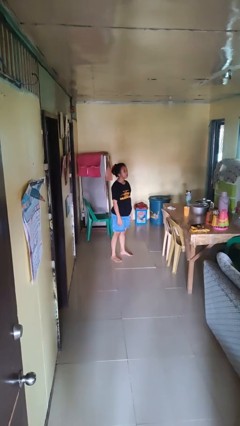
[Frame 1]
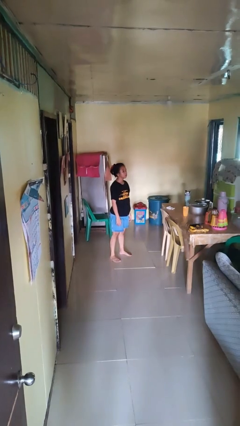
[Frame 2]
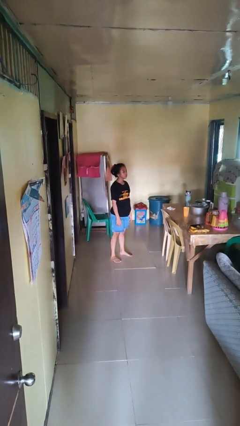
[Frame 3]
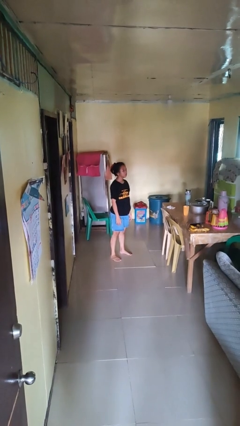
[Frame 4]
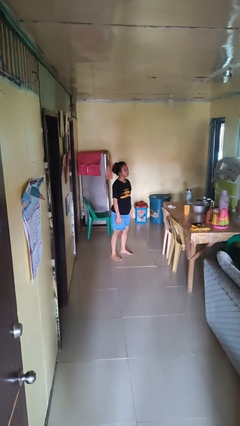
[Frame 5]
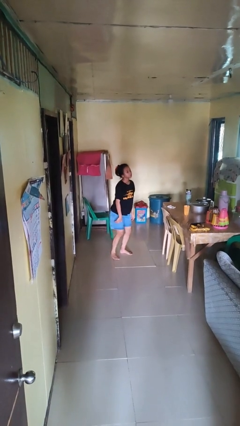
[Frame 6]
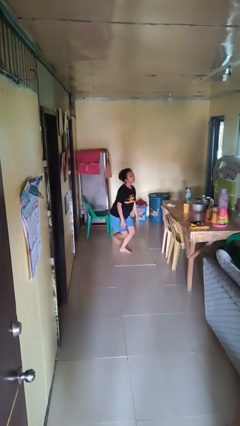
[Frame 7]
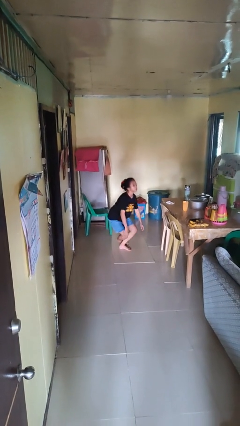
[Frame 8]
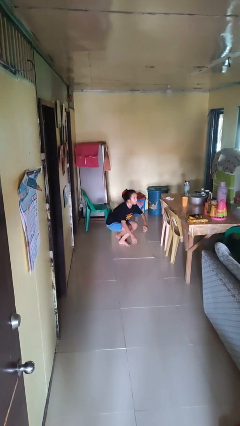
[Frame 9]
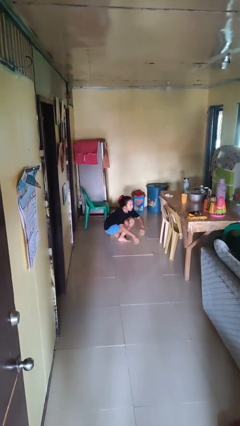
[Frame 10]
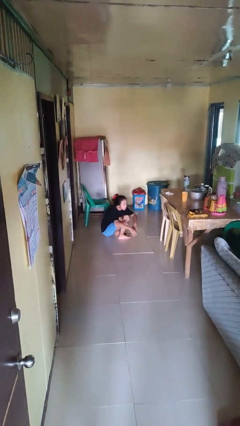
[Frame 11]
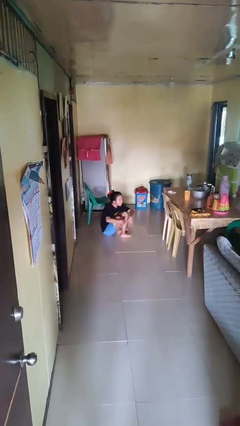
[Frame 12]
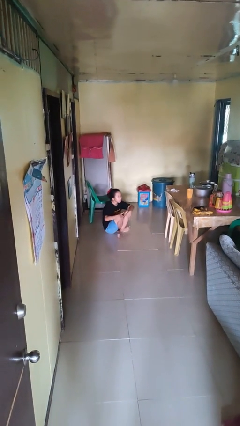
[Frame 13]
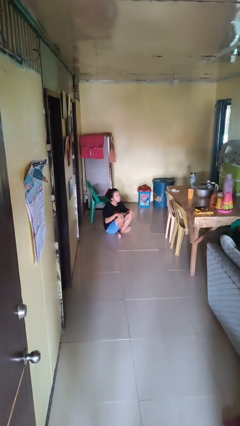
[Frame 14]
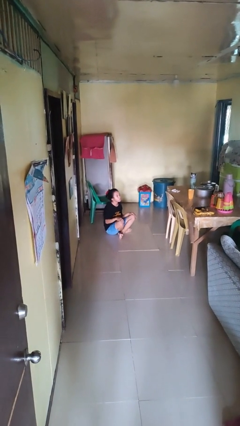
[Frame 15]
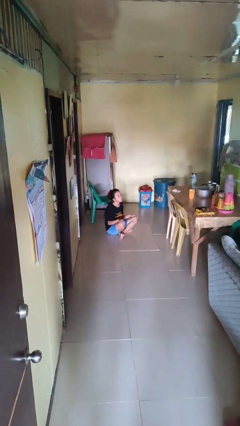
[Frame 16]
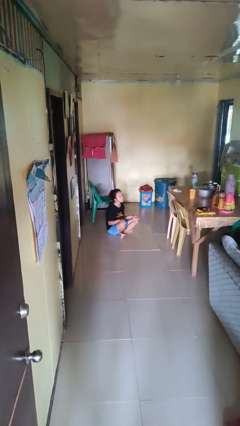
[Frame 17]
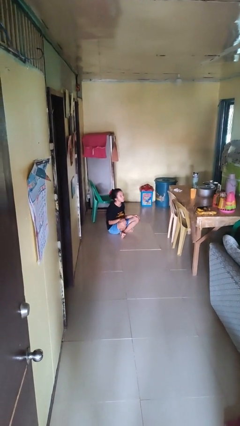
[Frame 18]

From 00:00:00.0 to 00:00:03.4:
person sits crisscross

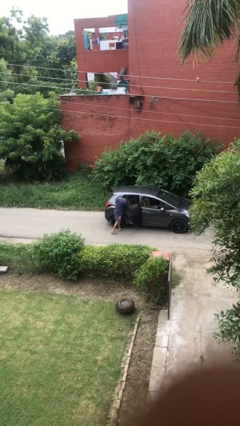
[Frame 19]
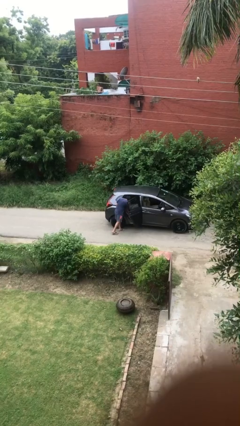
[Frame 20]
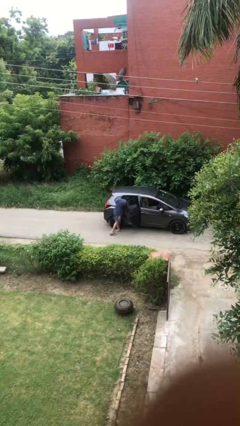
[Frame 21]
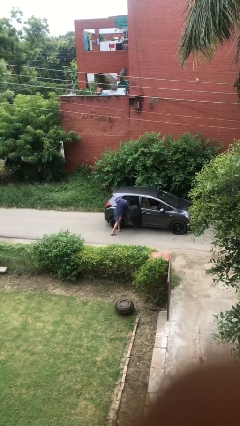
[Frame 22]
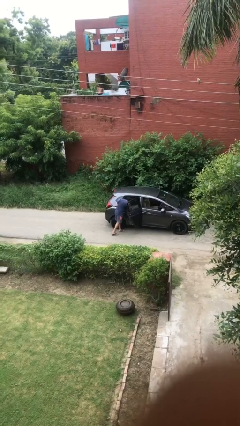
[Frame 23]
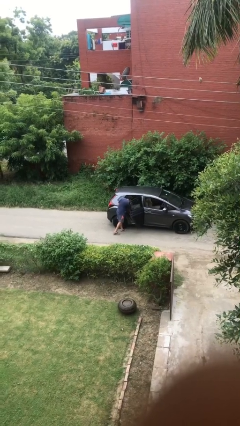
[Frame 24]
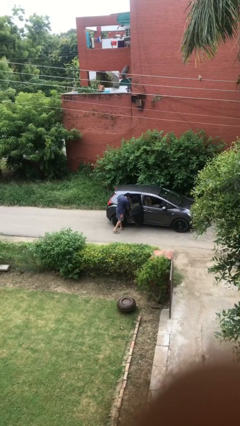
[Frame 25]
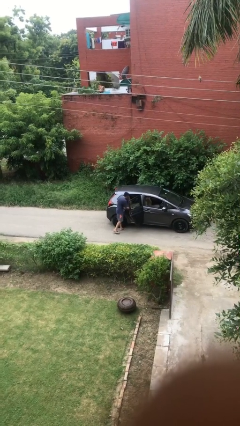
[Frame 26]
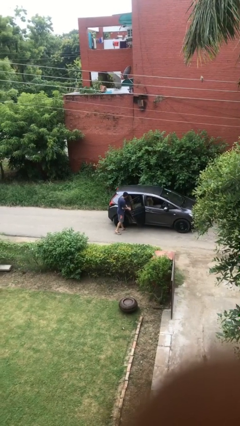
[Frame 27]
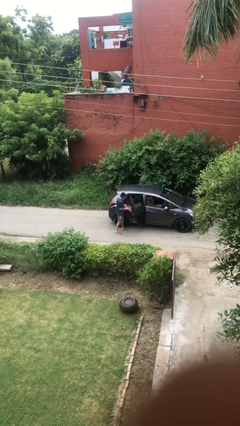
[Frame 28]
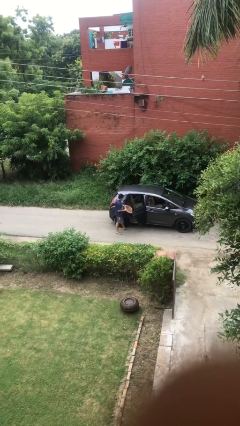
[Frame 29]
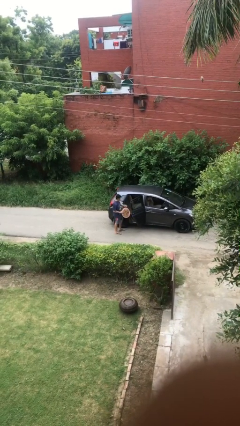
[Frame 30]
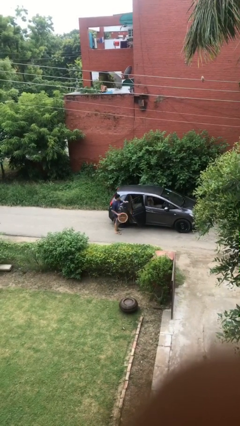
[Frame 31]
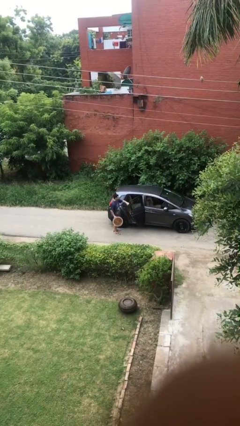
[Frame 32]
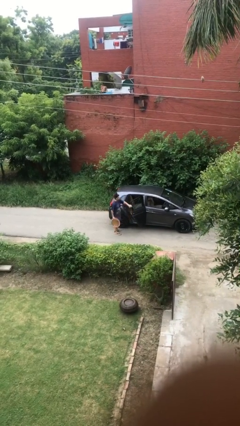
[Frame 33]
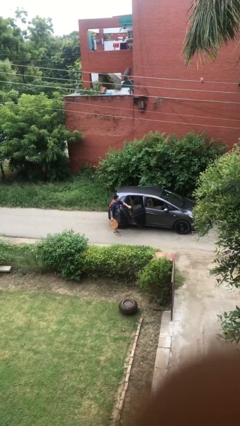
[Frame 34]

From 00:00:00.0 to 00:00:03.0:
person unloads car

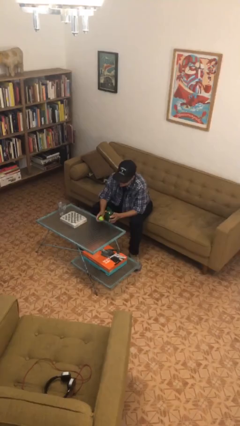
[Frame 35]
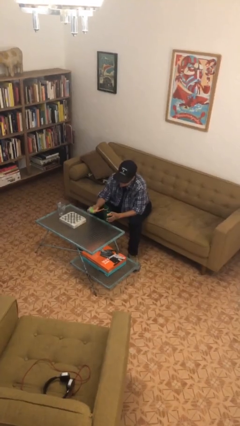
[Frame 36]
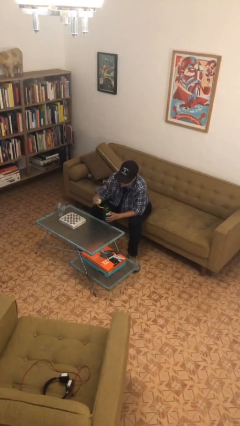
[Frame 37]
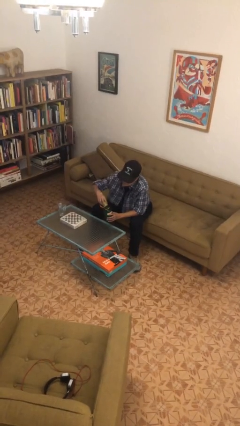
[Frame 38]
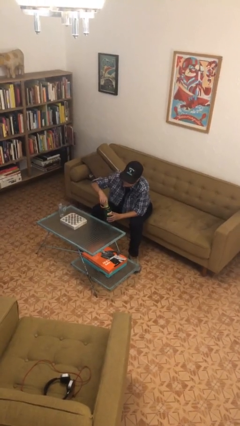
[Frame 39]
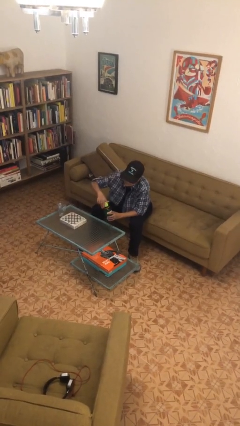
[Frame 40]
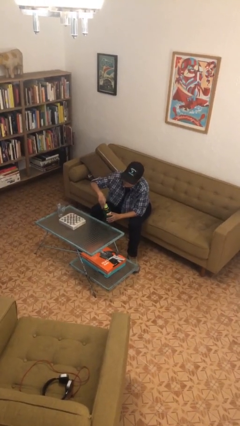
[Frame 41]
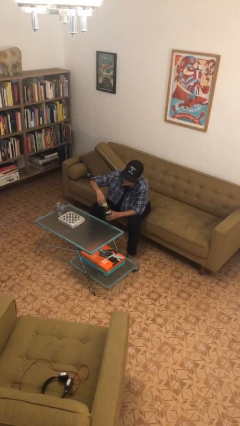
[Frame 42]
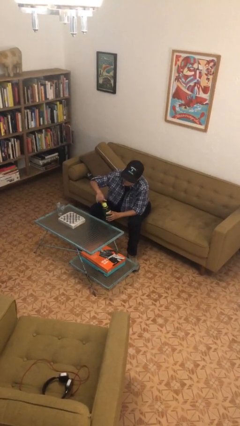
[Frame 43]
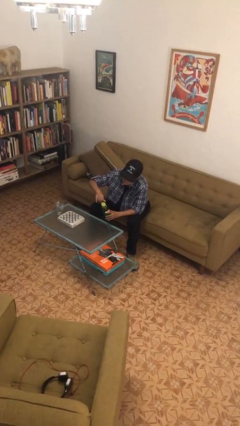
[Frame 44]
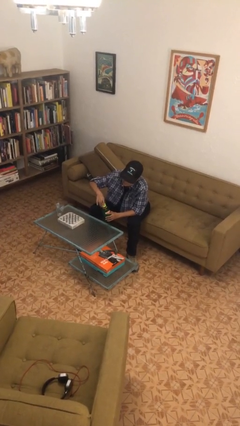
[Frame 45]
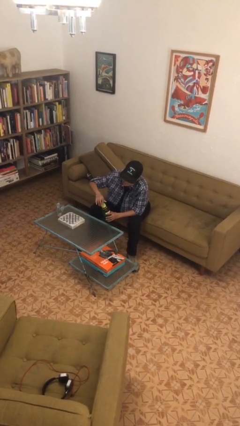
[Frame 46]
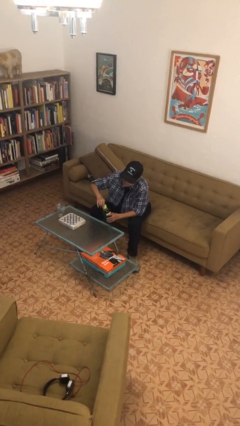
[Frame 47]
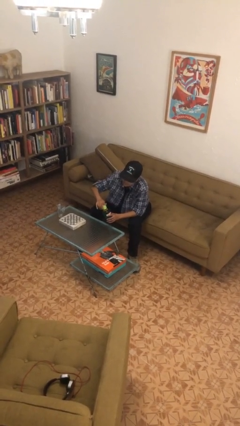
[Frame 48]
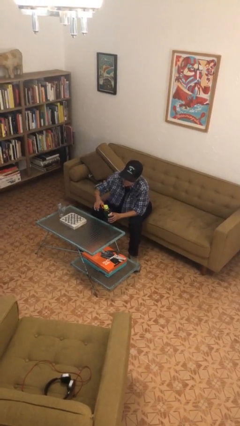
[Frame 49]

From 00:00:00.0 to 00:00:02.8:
person screws lid to bottle

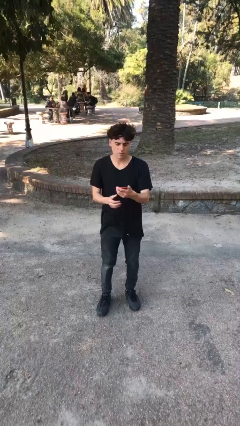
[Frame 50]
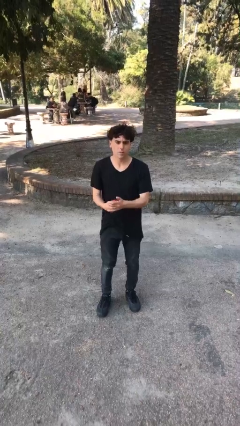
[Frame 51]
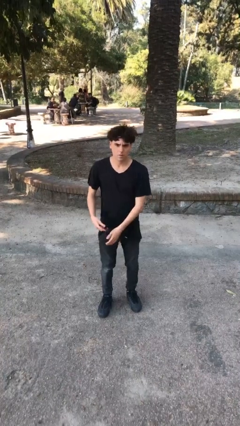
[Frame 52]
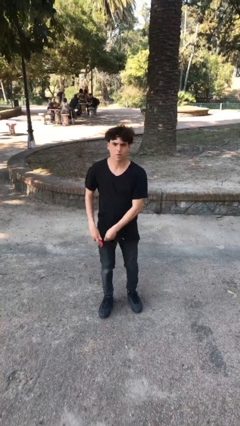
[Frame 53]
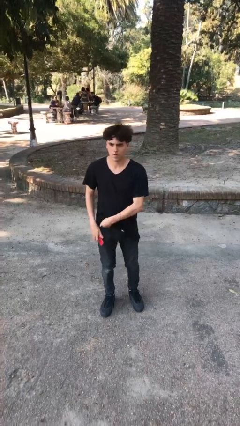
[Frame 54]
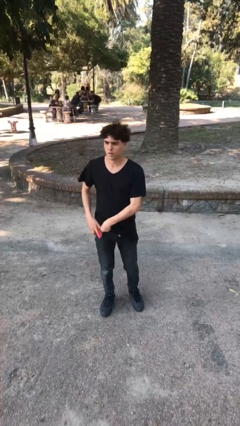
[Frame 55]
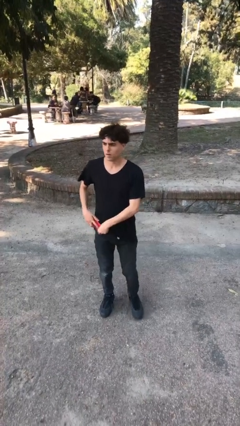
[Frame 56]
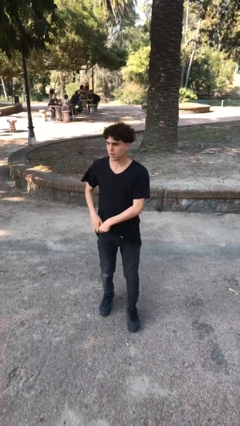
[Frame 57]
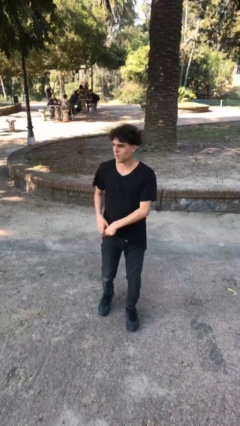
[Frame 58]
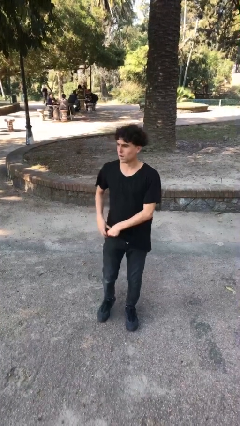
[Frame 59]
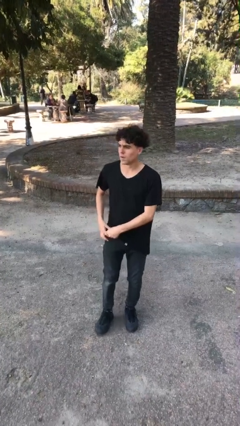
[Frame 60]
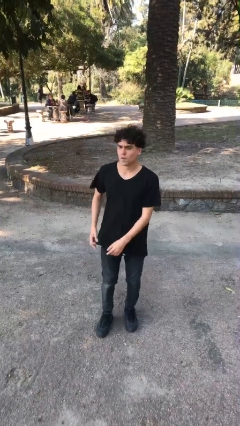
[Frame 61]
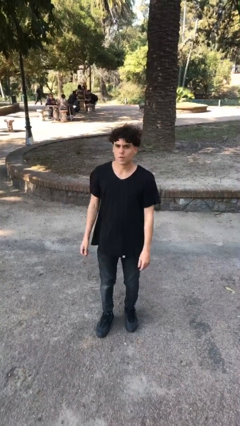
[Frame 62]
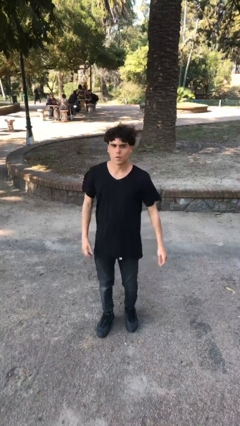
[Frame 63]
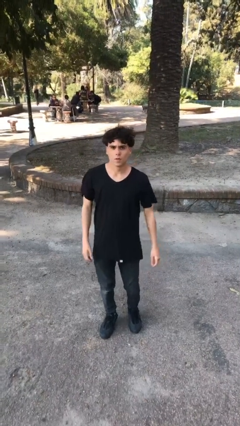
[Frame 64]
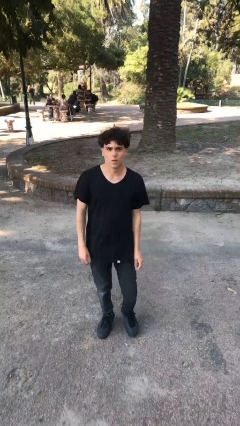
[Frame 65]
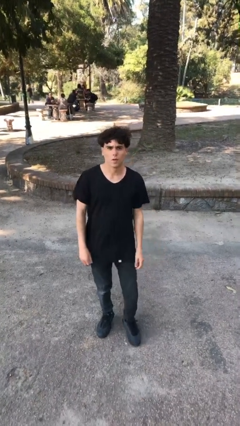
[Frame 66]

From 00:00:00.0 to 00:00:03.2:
person puts phone into pocket

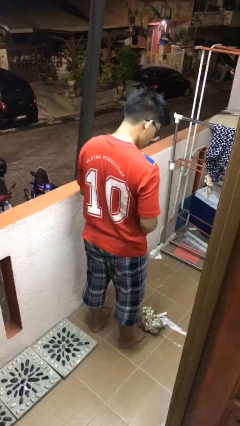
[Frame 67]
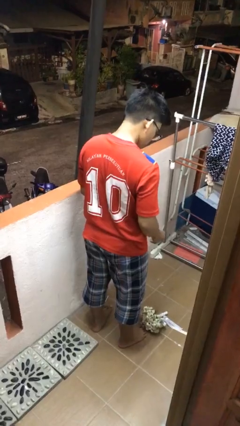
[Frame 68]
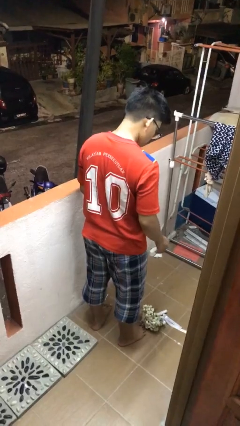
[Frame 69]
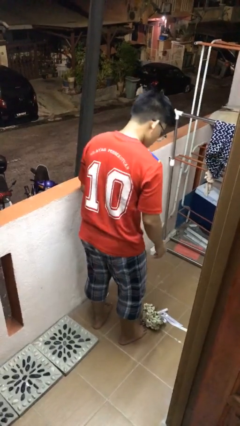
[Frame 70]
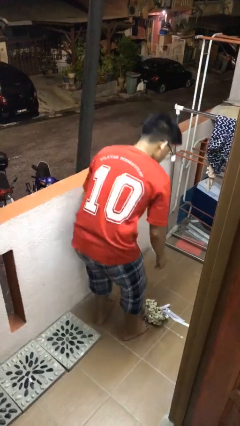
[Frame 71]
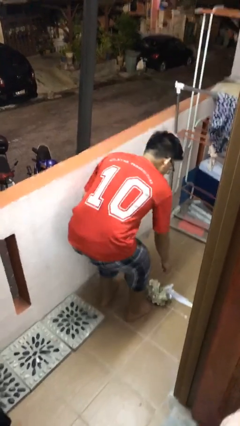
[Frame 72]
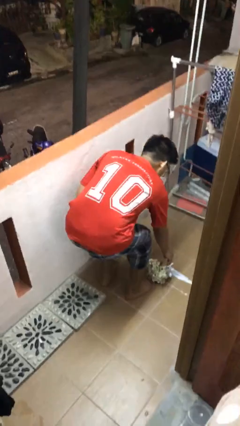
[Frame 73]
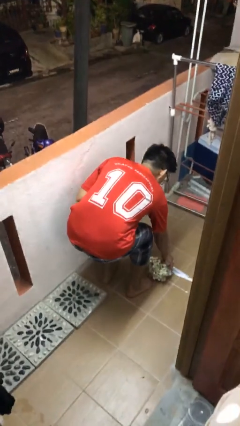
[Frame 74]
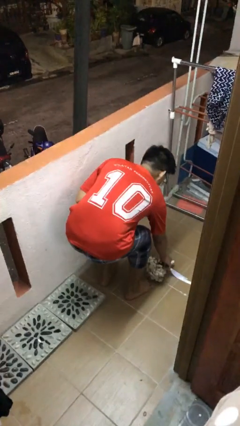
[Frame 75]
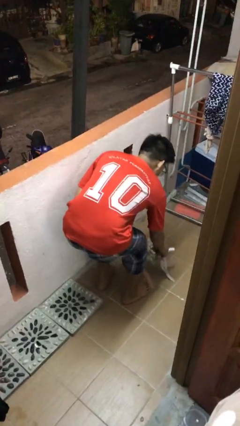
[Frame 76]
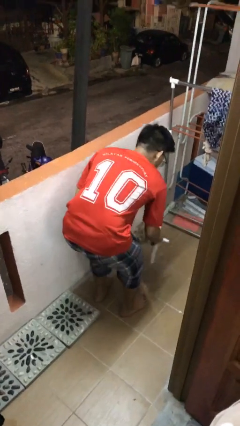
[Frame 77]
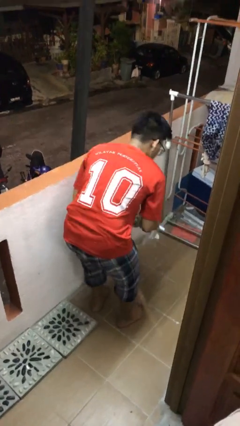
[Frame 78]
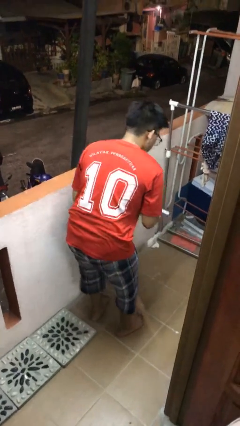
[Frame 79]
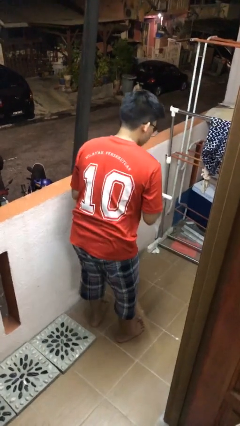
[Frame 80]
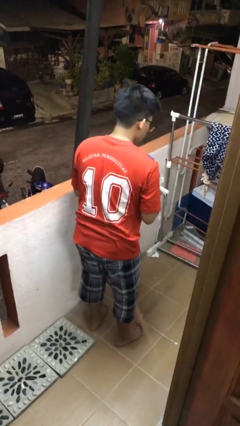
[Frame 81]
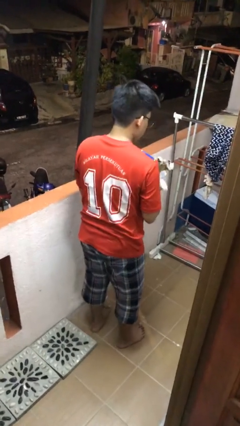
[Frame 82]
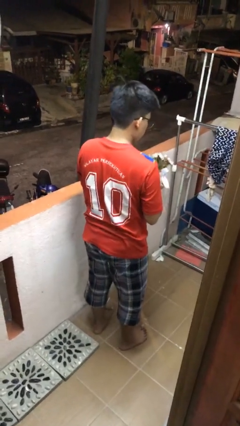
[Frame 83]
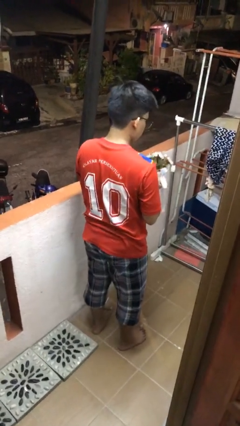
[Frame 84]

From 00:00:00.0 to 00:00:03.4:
person picks up object from floor

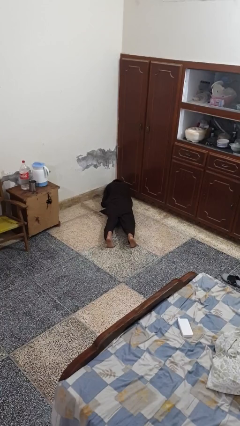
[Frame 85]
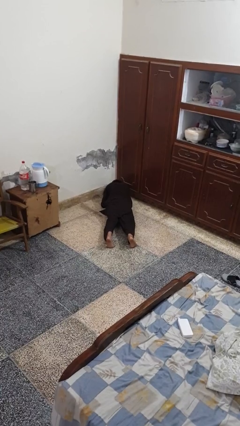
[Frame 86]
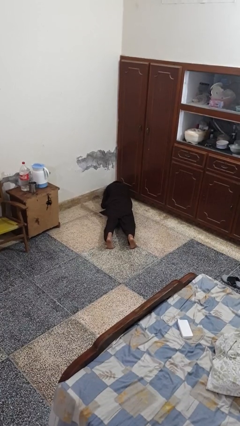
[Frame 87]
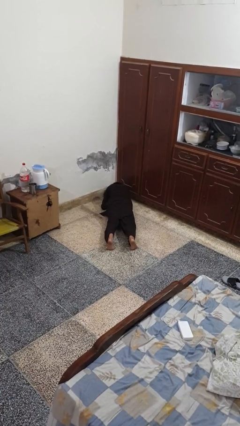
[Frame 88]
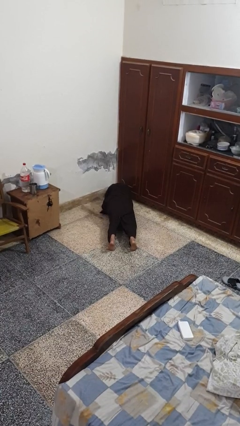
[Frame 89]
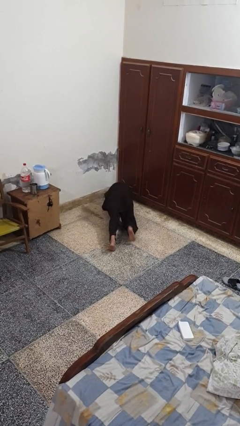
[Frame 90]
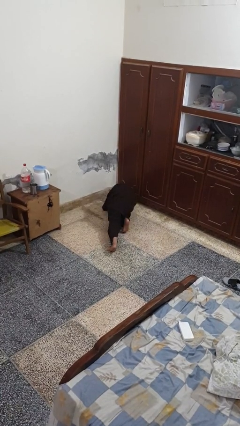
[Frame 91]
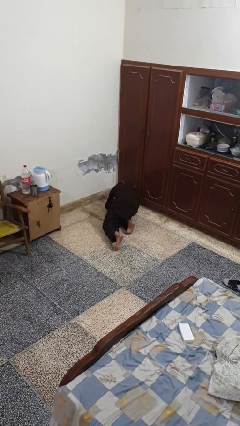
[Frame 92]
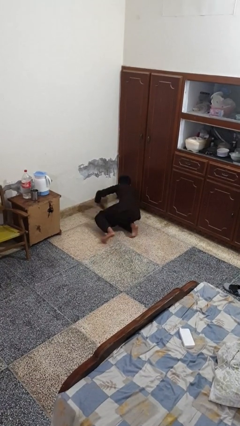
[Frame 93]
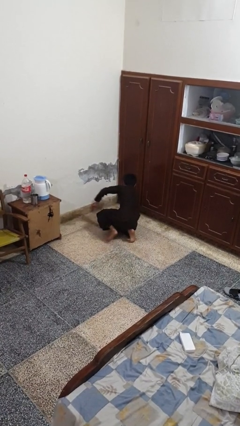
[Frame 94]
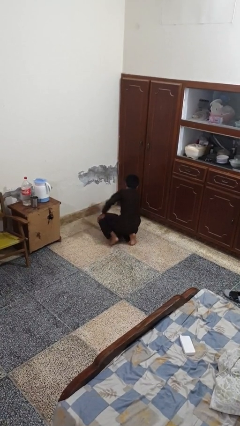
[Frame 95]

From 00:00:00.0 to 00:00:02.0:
person stands up from floor
